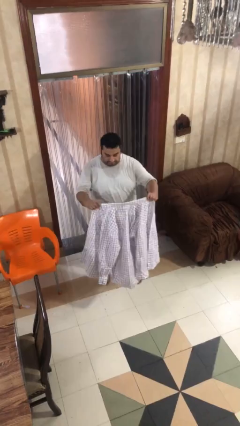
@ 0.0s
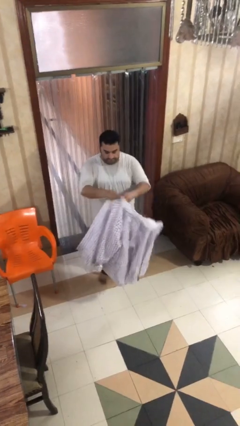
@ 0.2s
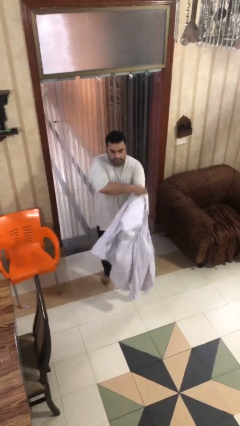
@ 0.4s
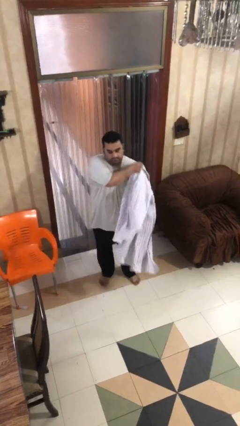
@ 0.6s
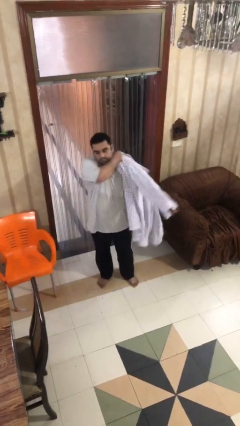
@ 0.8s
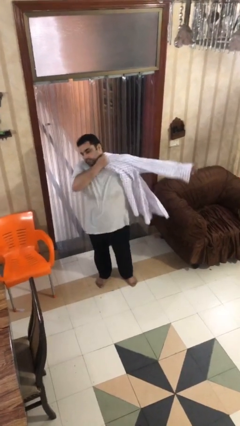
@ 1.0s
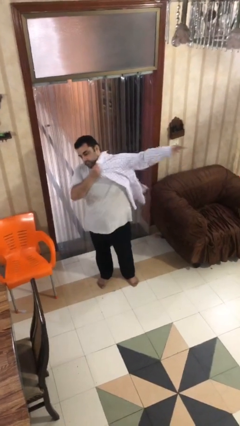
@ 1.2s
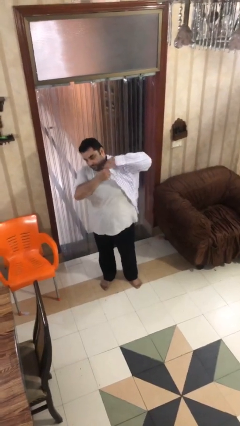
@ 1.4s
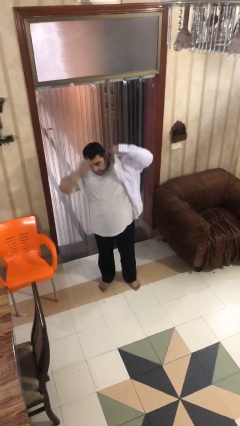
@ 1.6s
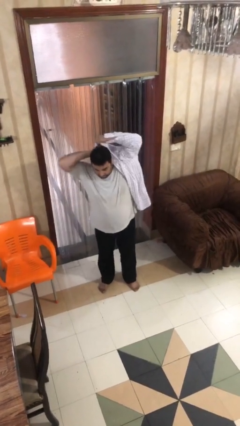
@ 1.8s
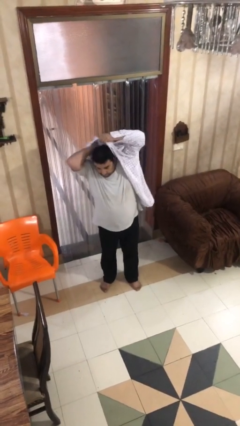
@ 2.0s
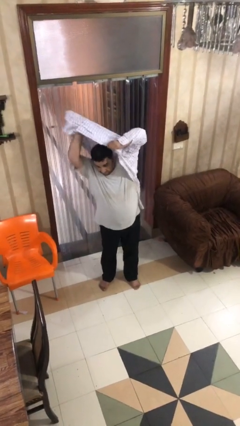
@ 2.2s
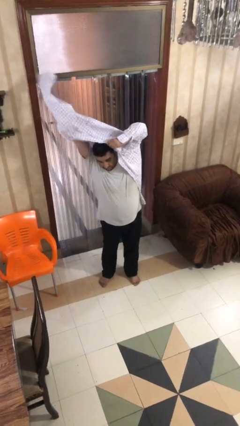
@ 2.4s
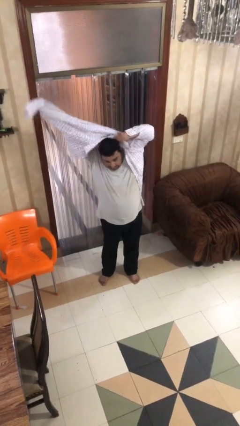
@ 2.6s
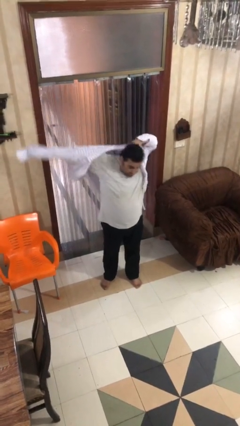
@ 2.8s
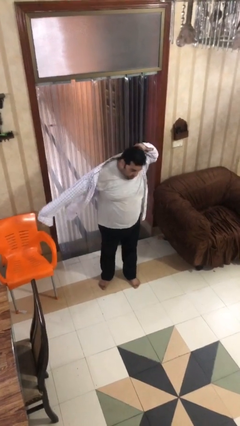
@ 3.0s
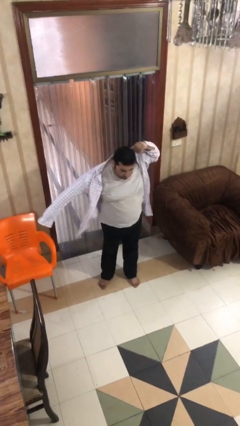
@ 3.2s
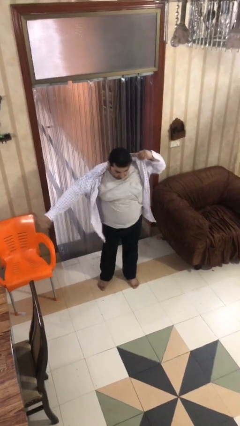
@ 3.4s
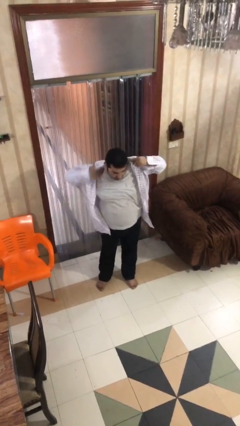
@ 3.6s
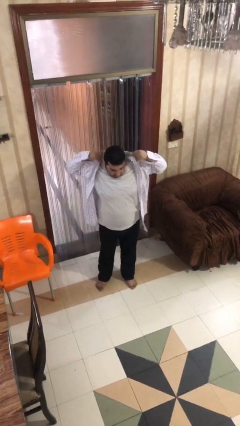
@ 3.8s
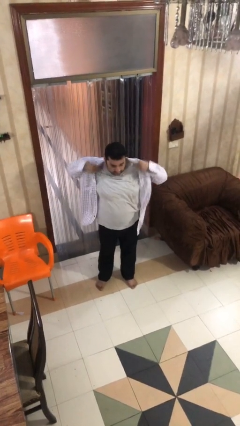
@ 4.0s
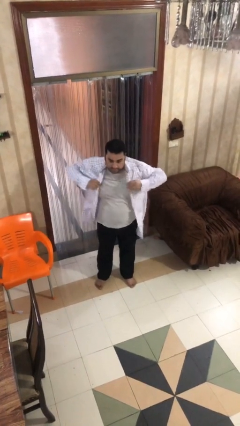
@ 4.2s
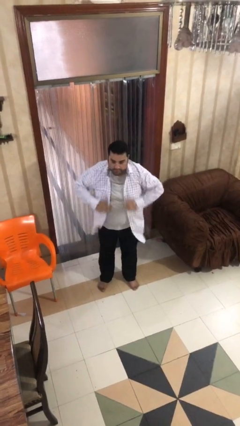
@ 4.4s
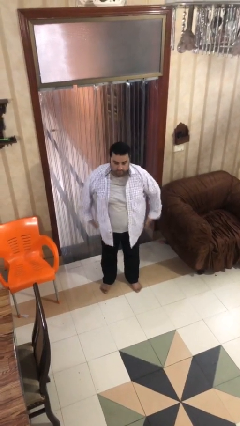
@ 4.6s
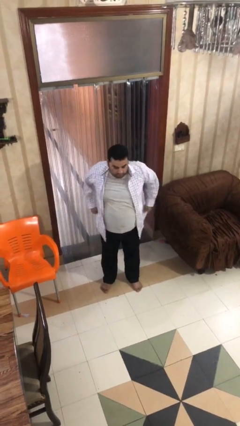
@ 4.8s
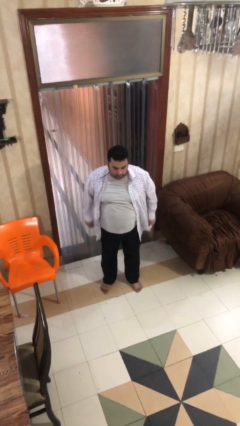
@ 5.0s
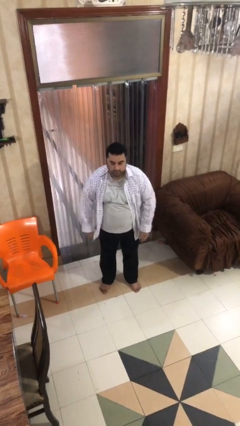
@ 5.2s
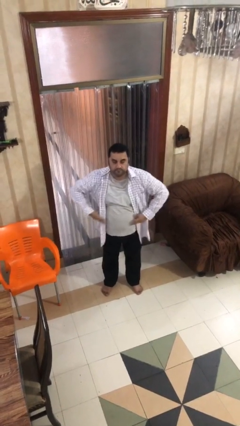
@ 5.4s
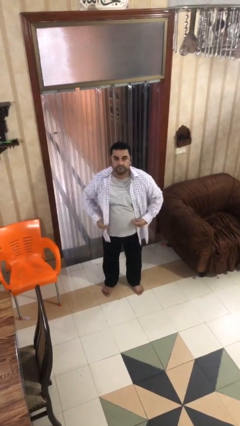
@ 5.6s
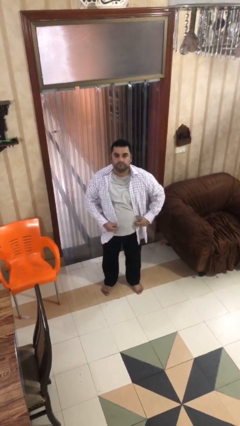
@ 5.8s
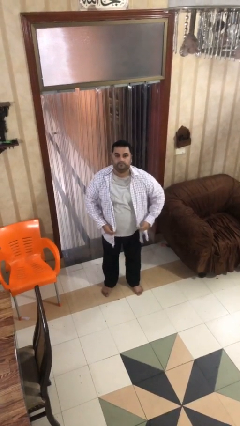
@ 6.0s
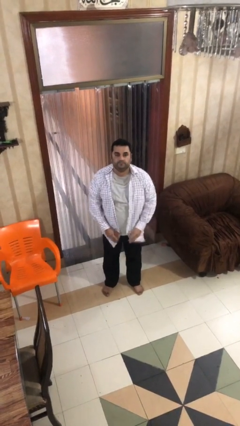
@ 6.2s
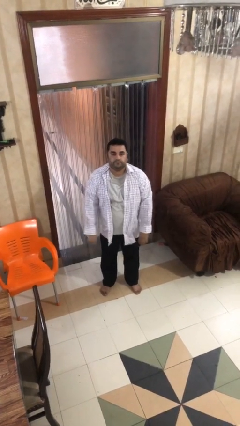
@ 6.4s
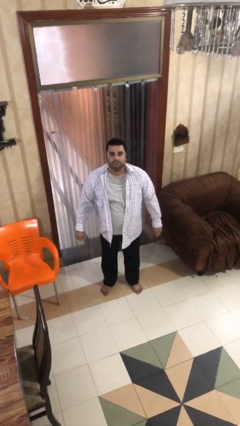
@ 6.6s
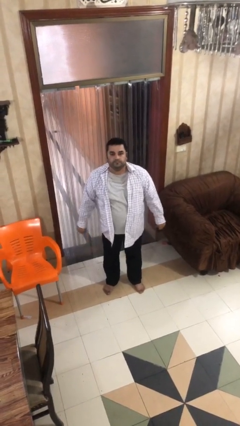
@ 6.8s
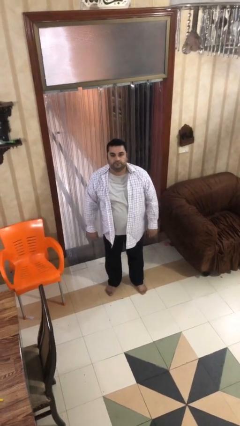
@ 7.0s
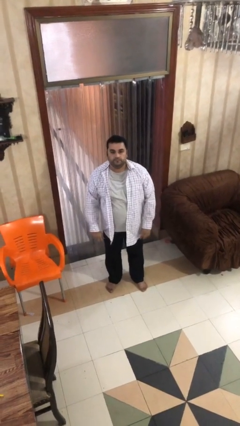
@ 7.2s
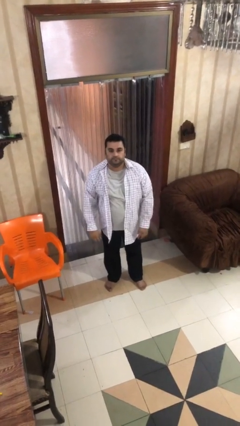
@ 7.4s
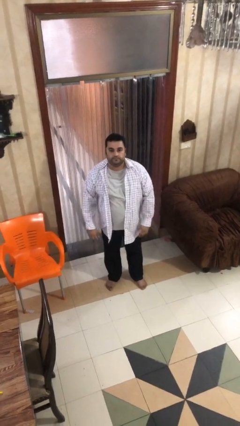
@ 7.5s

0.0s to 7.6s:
person puts on shirt

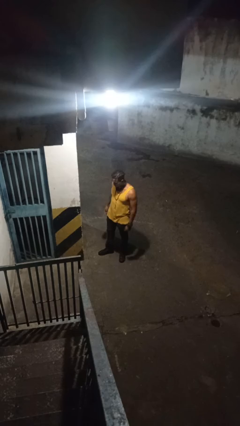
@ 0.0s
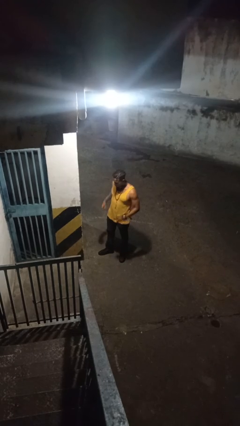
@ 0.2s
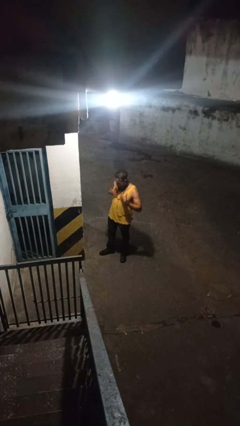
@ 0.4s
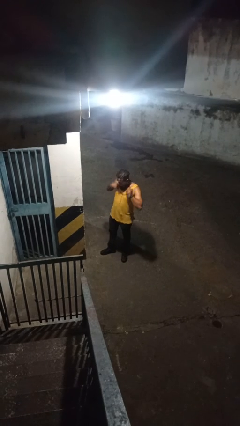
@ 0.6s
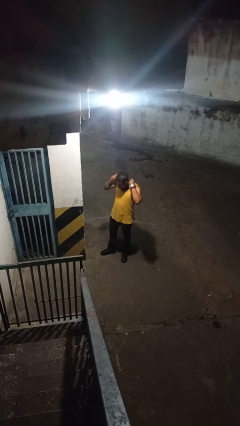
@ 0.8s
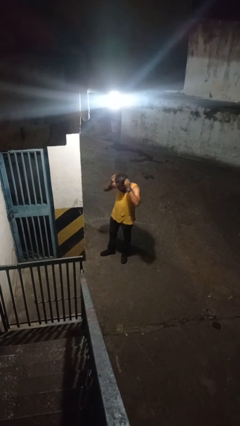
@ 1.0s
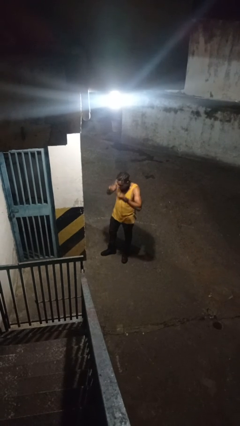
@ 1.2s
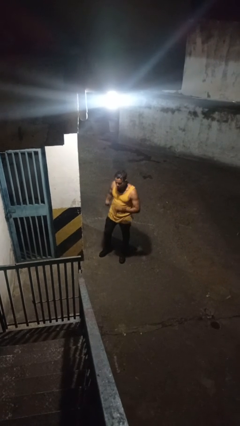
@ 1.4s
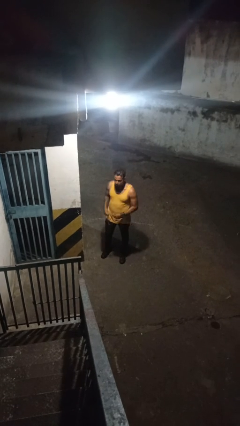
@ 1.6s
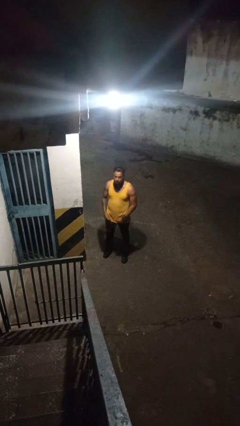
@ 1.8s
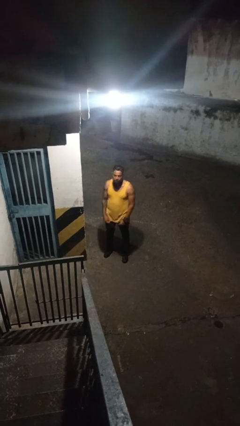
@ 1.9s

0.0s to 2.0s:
person takes off necklace

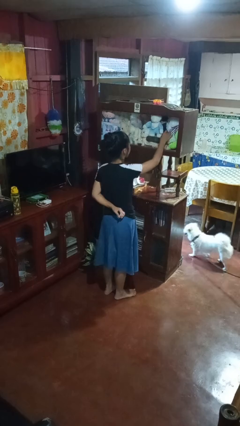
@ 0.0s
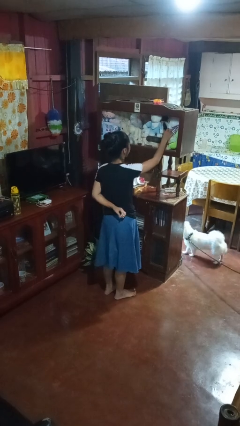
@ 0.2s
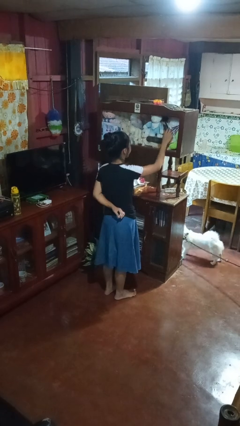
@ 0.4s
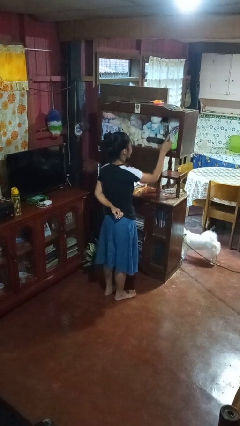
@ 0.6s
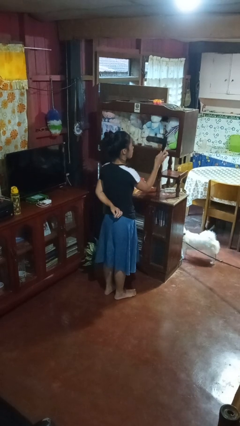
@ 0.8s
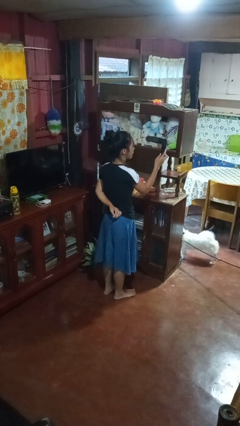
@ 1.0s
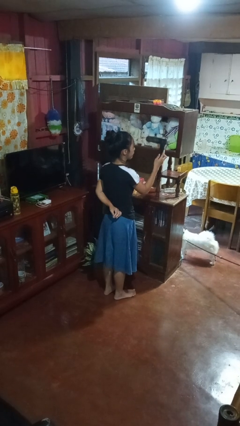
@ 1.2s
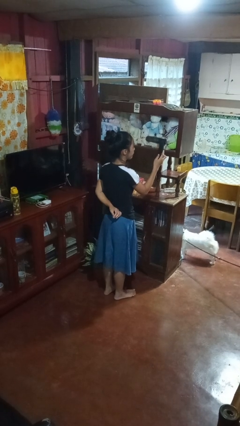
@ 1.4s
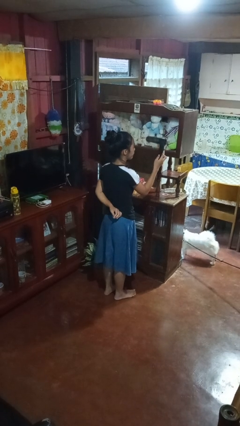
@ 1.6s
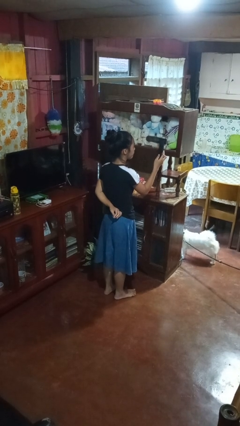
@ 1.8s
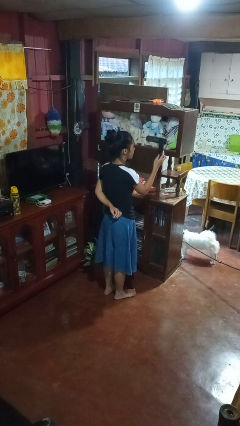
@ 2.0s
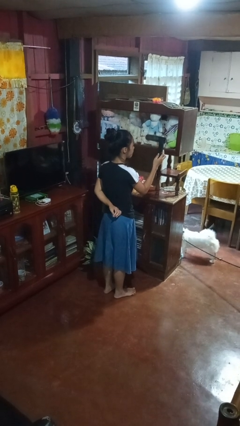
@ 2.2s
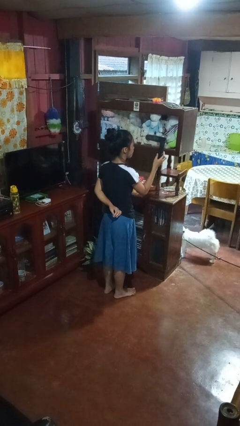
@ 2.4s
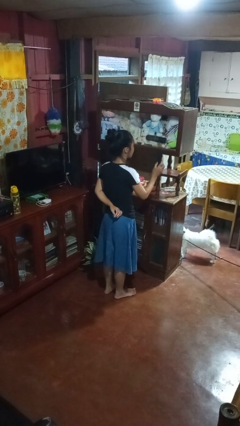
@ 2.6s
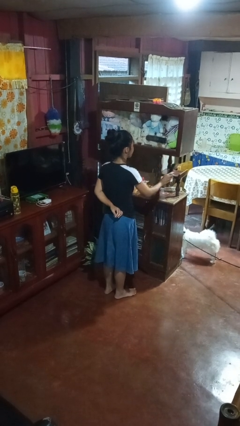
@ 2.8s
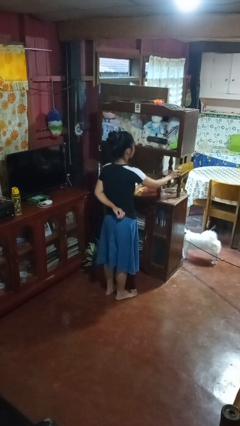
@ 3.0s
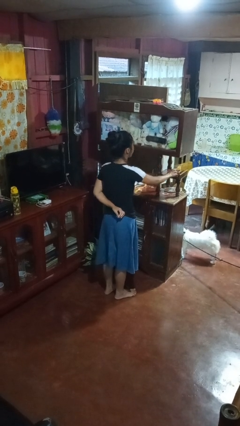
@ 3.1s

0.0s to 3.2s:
person picks up object from shelf

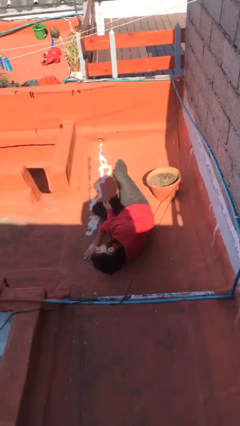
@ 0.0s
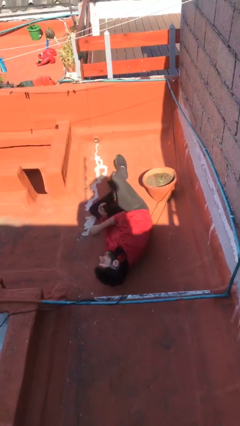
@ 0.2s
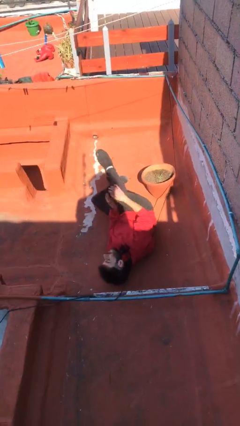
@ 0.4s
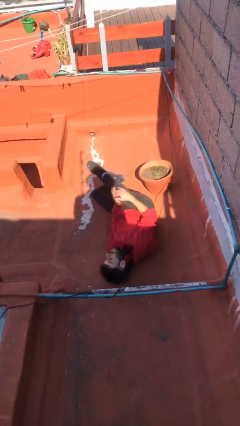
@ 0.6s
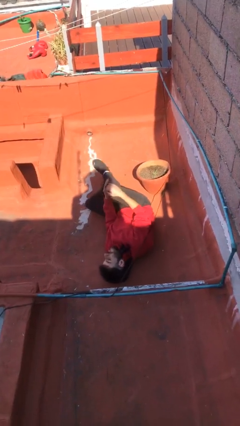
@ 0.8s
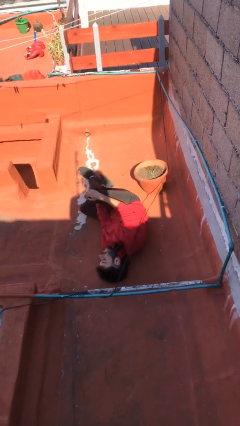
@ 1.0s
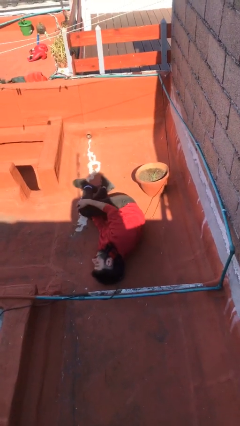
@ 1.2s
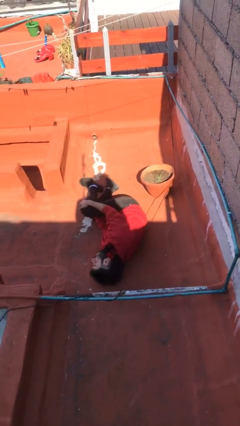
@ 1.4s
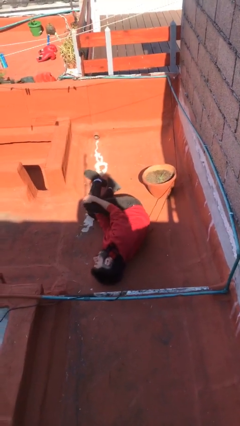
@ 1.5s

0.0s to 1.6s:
person lies down on floor

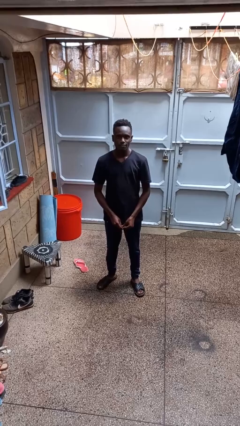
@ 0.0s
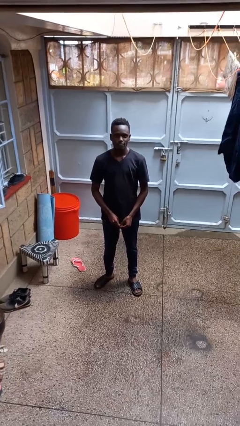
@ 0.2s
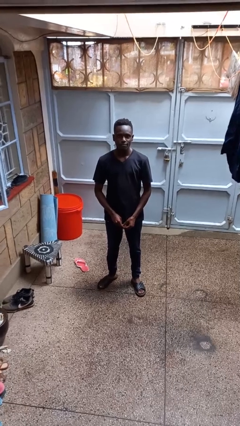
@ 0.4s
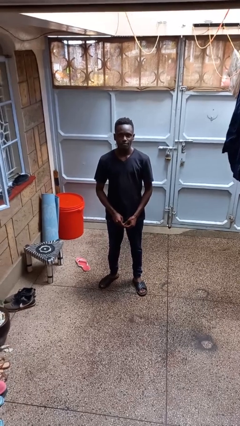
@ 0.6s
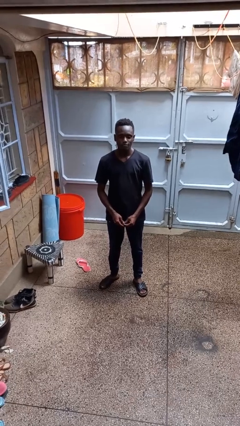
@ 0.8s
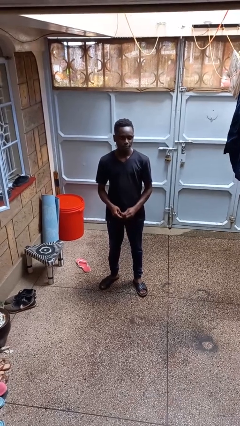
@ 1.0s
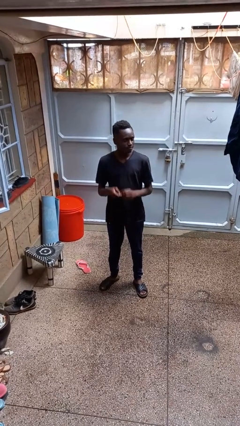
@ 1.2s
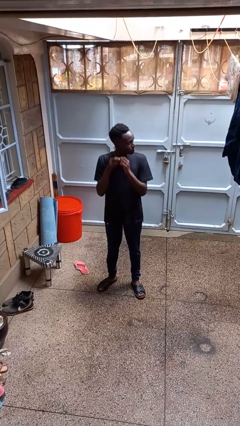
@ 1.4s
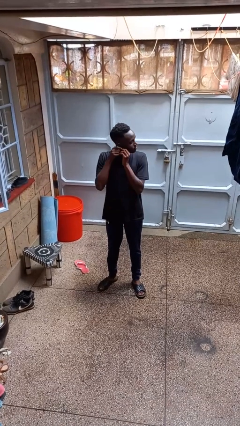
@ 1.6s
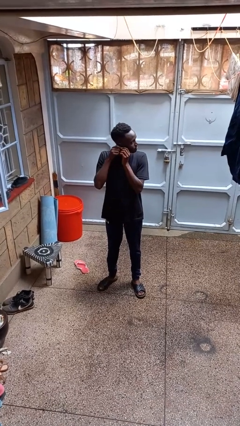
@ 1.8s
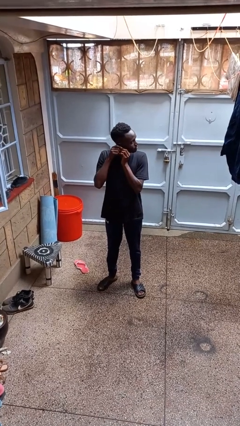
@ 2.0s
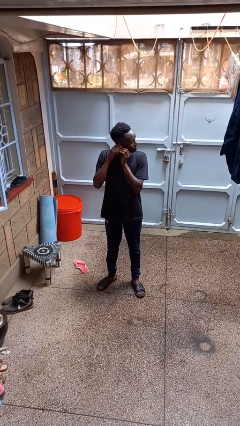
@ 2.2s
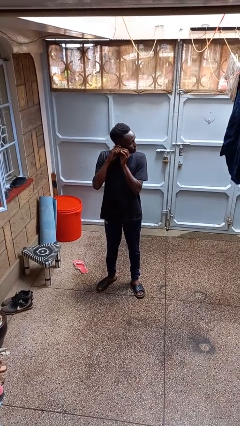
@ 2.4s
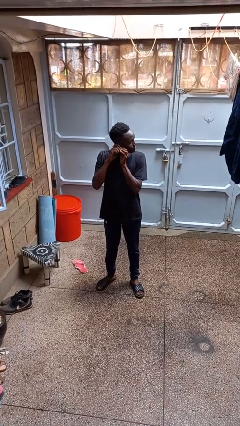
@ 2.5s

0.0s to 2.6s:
person puts on earrings

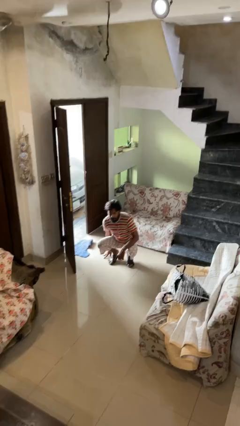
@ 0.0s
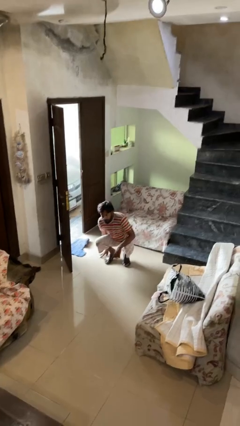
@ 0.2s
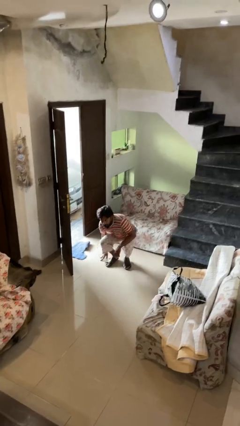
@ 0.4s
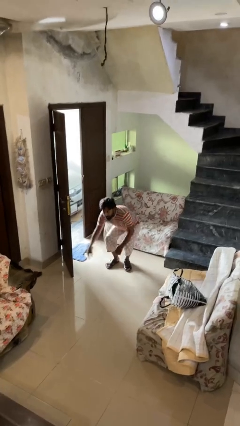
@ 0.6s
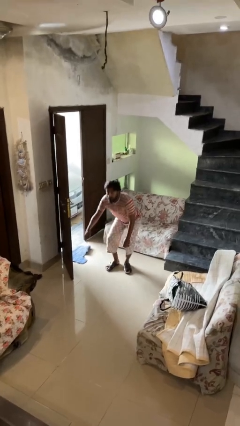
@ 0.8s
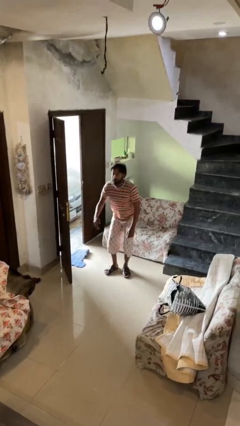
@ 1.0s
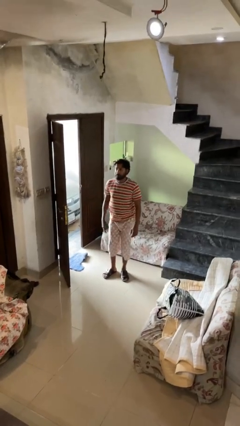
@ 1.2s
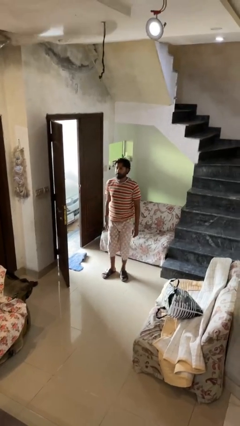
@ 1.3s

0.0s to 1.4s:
person stands up
